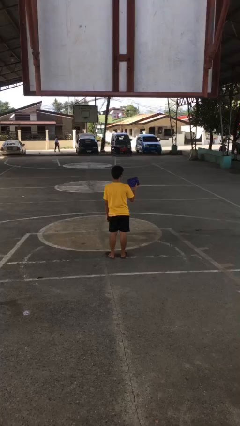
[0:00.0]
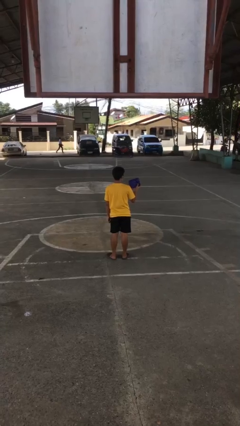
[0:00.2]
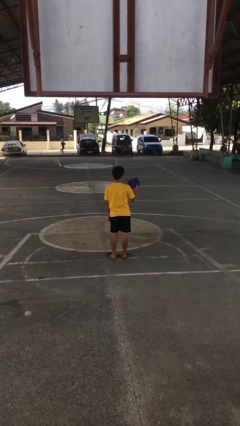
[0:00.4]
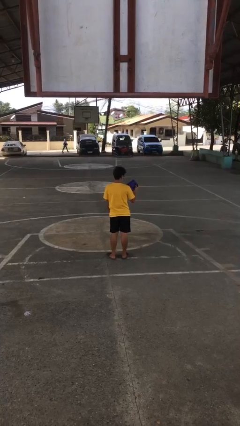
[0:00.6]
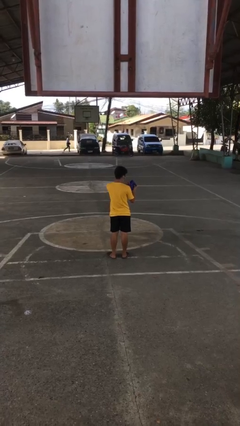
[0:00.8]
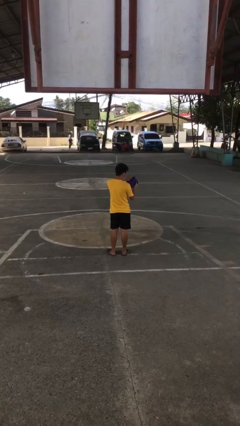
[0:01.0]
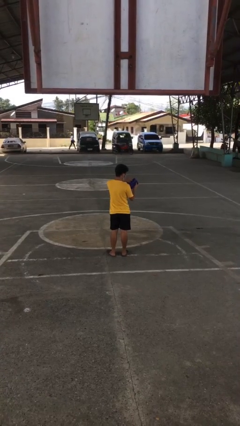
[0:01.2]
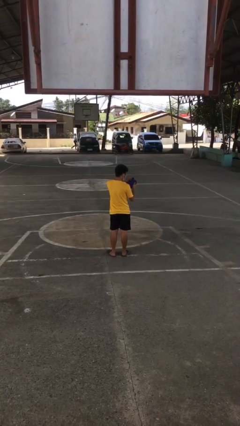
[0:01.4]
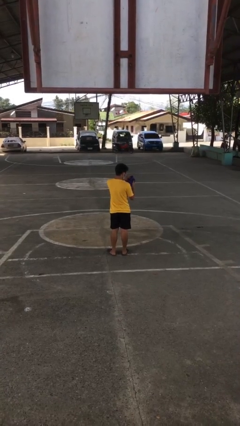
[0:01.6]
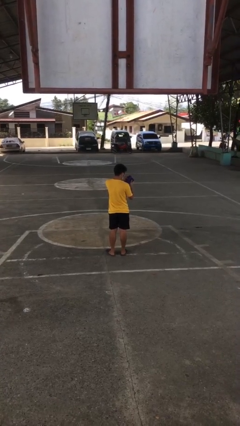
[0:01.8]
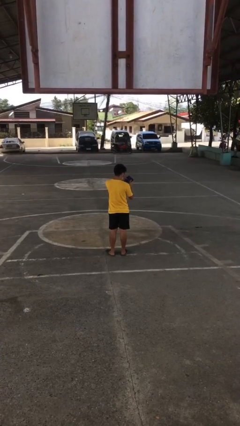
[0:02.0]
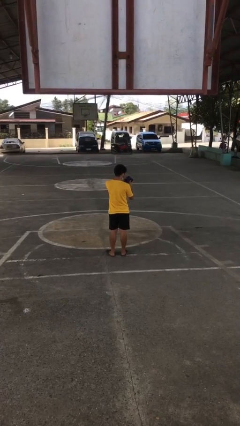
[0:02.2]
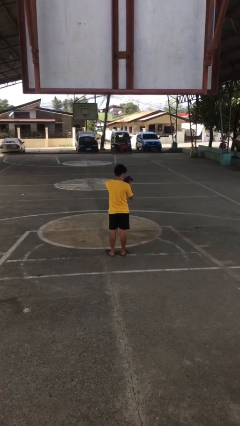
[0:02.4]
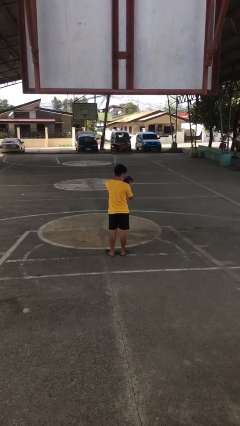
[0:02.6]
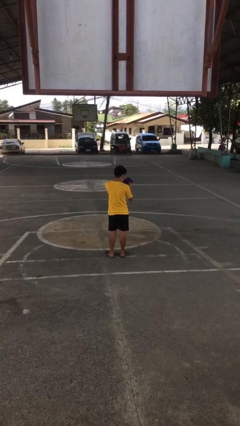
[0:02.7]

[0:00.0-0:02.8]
person searches in purse

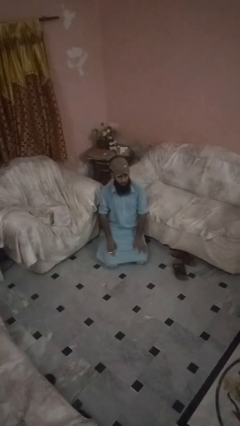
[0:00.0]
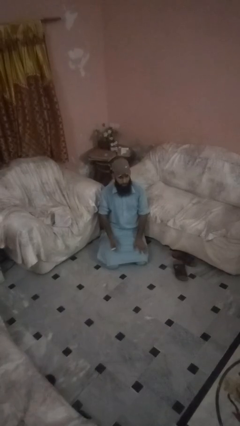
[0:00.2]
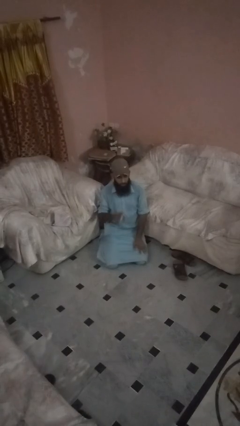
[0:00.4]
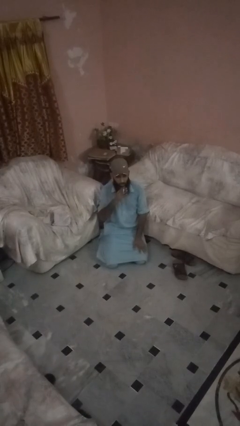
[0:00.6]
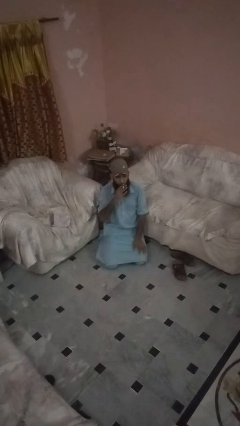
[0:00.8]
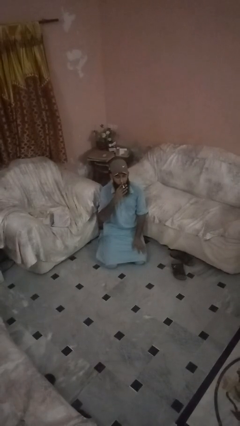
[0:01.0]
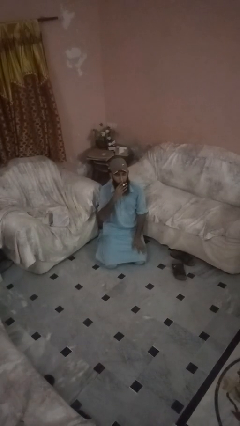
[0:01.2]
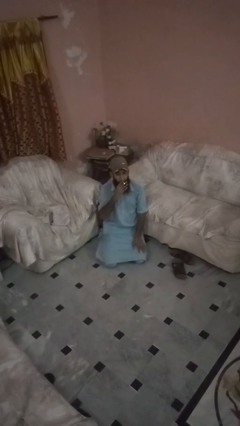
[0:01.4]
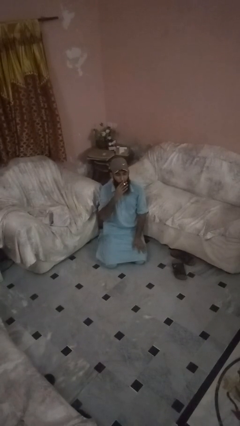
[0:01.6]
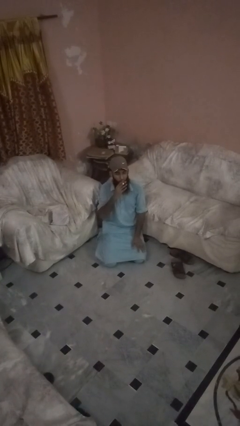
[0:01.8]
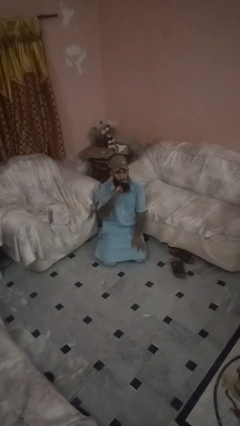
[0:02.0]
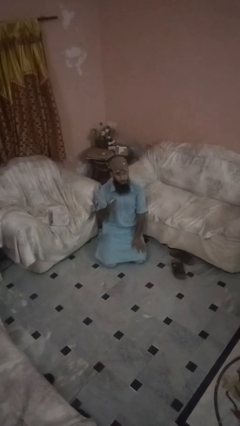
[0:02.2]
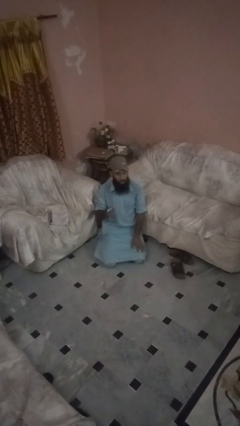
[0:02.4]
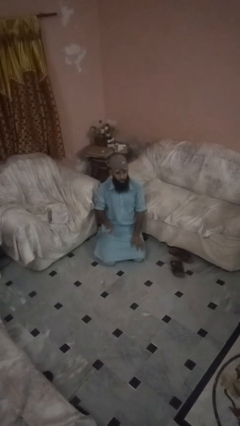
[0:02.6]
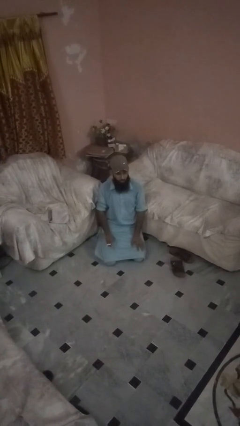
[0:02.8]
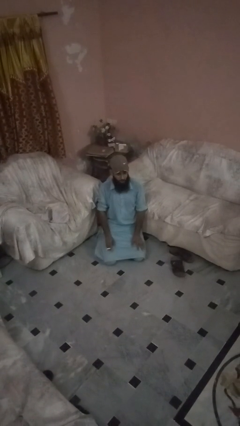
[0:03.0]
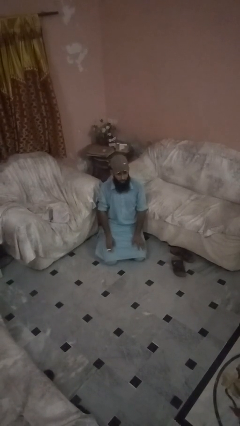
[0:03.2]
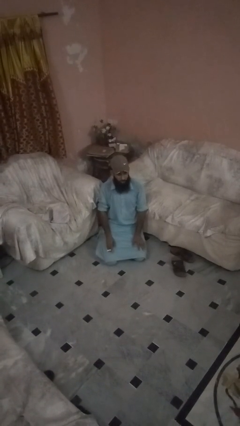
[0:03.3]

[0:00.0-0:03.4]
person vapes

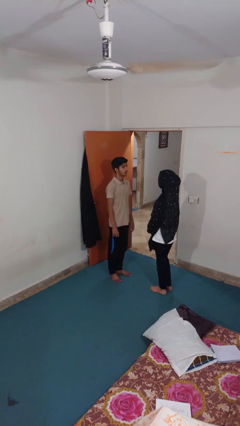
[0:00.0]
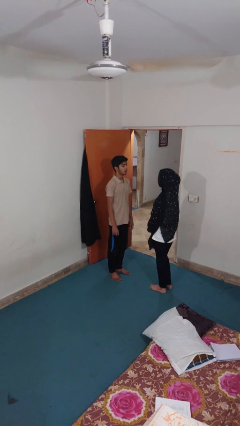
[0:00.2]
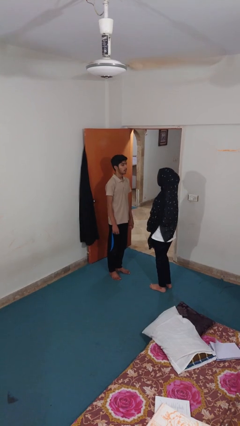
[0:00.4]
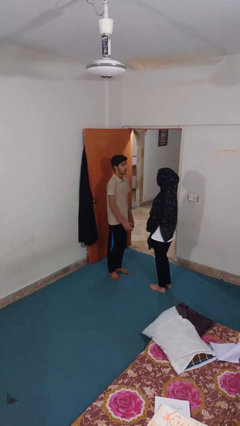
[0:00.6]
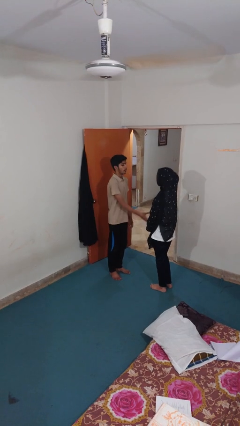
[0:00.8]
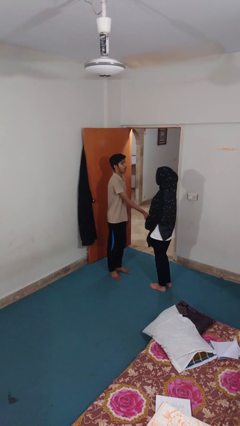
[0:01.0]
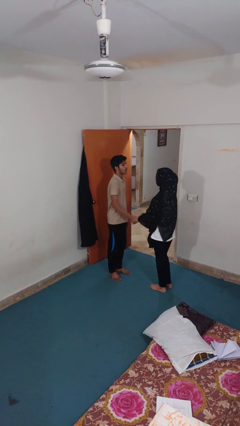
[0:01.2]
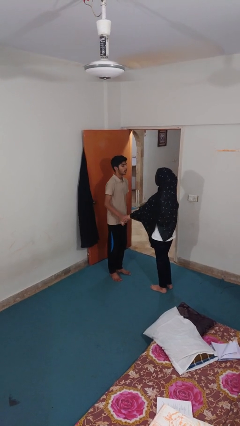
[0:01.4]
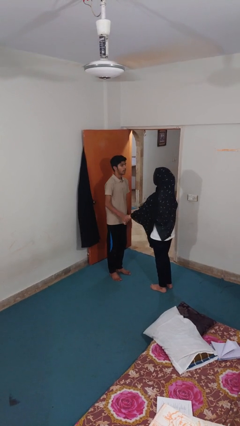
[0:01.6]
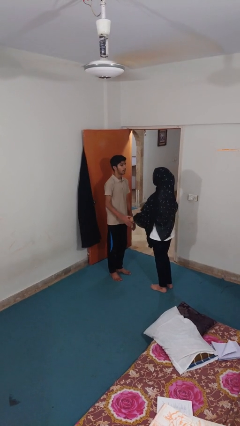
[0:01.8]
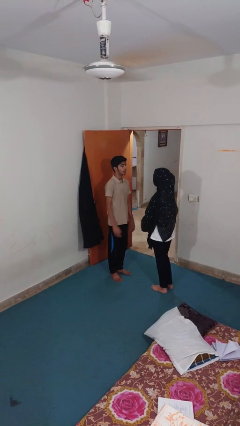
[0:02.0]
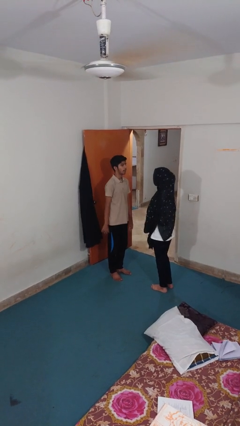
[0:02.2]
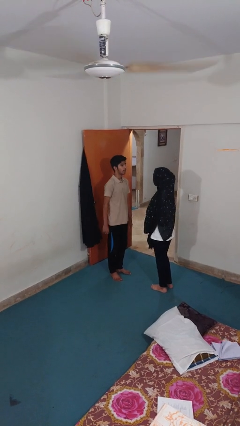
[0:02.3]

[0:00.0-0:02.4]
person grabs person by forearm

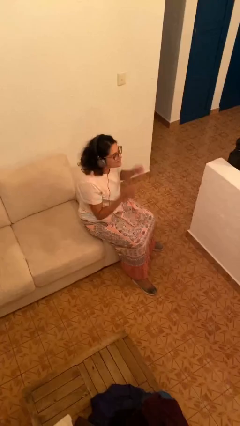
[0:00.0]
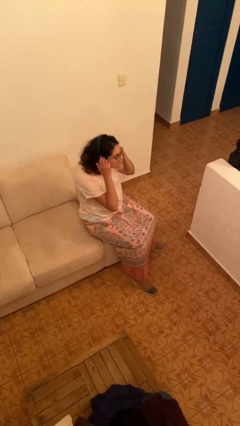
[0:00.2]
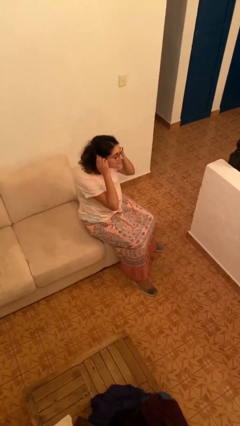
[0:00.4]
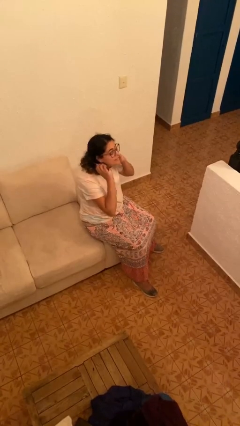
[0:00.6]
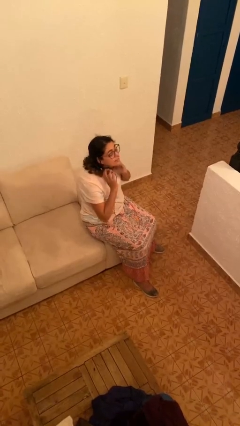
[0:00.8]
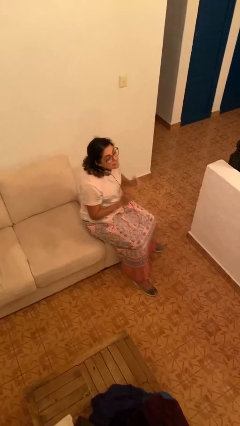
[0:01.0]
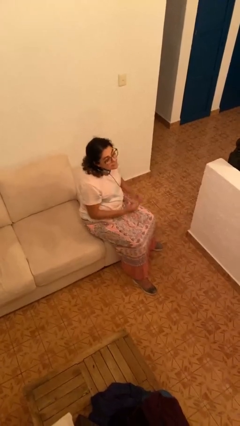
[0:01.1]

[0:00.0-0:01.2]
person takes off headphones

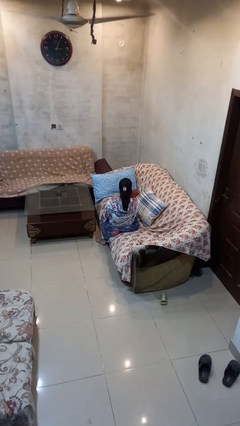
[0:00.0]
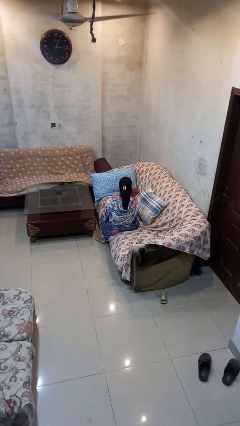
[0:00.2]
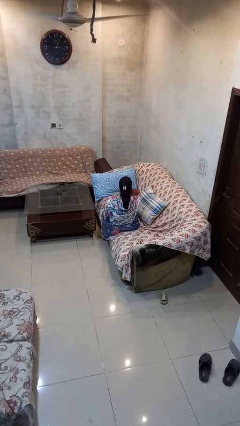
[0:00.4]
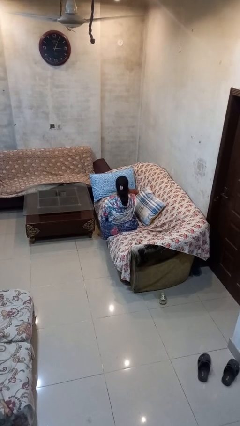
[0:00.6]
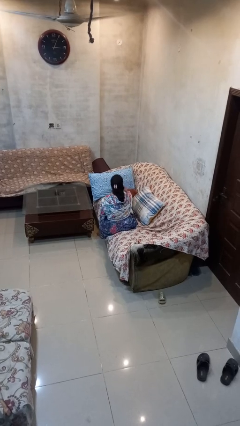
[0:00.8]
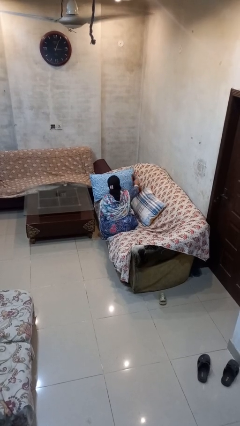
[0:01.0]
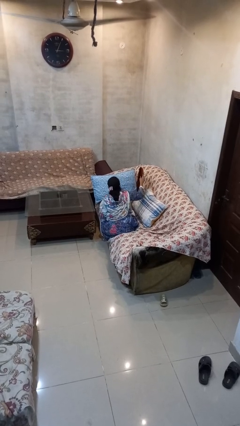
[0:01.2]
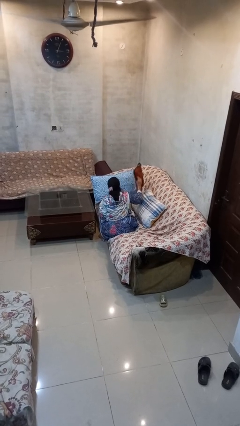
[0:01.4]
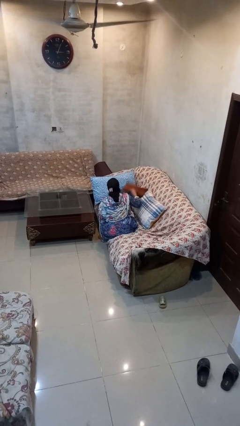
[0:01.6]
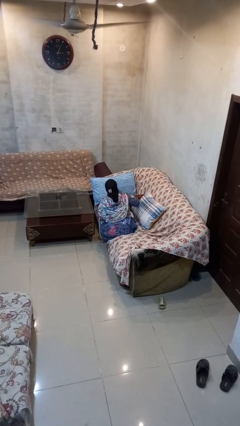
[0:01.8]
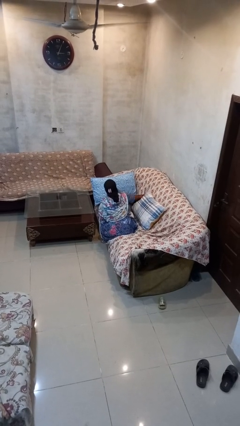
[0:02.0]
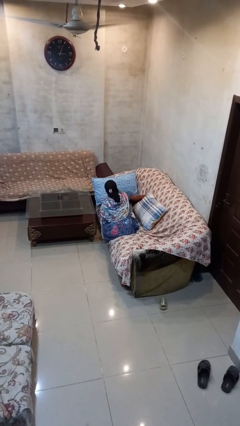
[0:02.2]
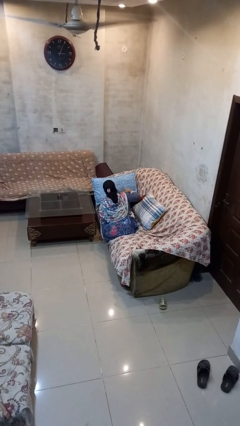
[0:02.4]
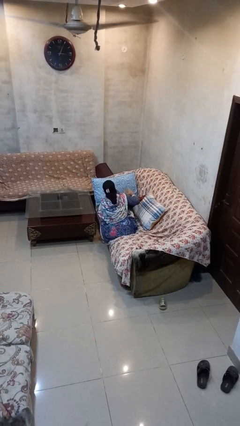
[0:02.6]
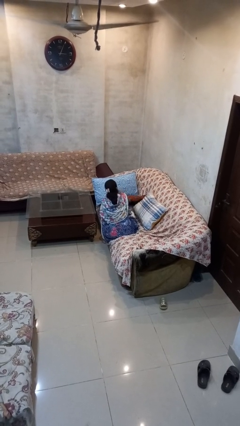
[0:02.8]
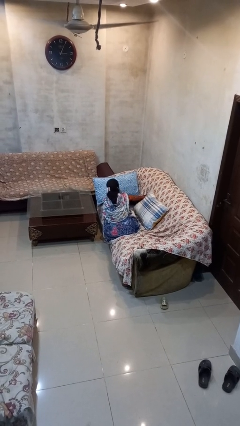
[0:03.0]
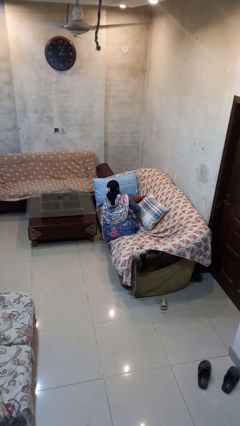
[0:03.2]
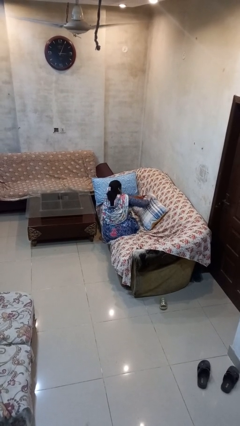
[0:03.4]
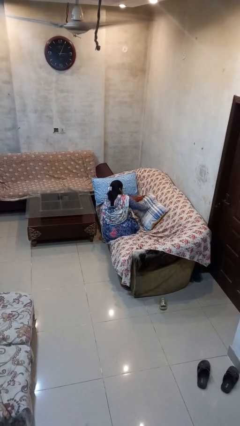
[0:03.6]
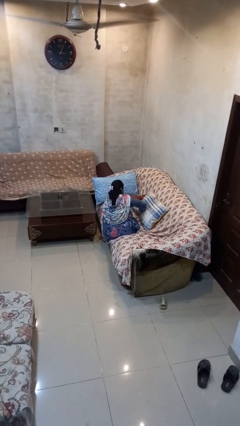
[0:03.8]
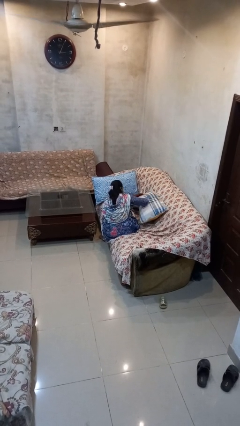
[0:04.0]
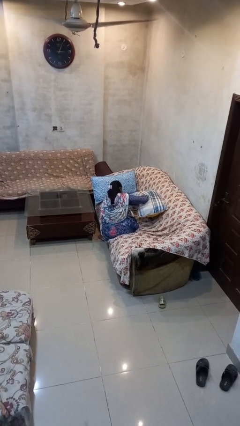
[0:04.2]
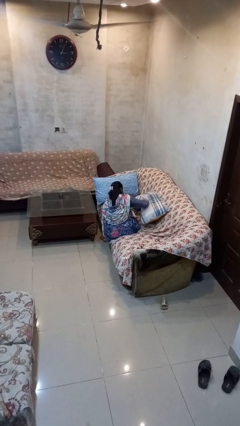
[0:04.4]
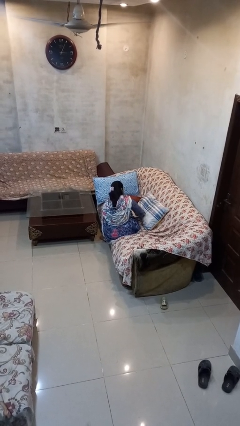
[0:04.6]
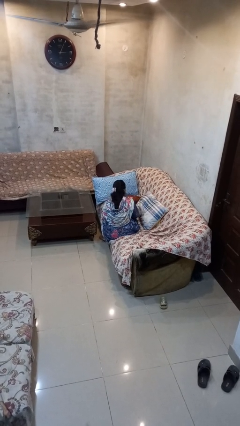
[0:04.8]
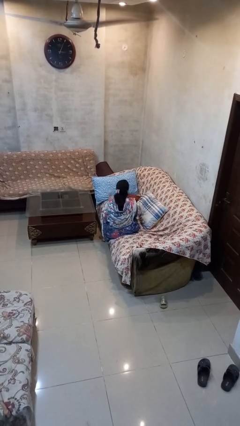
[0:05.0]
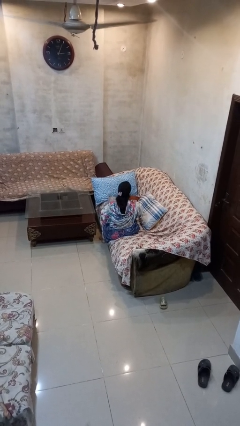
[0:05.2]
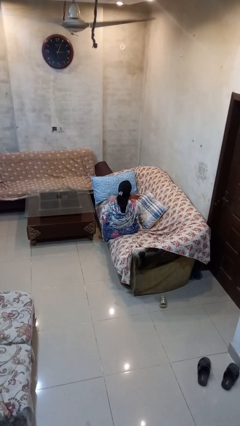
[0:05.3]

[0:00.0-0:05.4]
person searches in couch

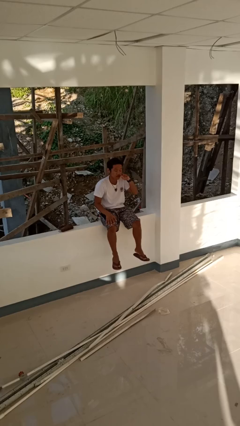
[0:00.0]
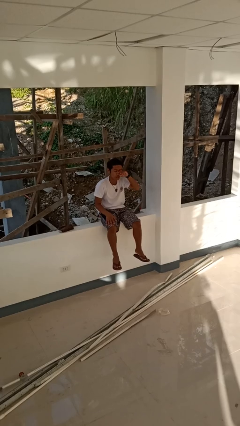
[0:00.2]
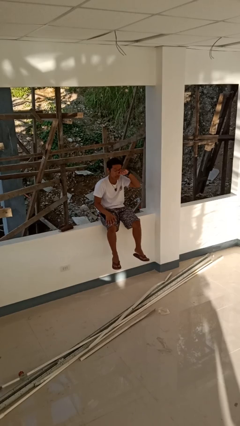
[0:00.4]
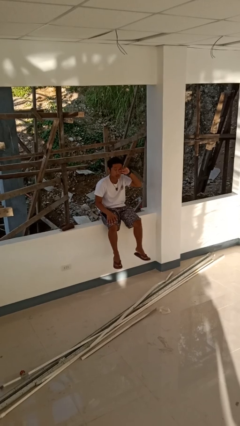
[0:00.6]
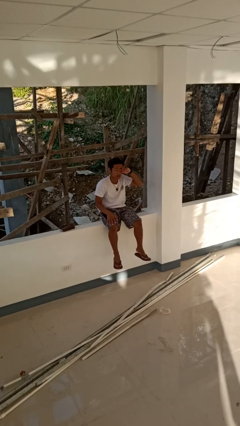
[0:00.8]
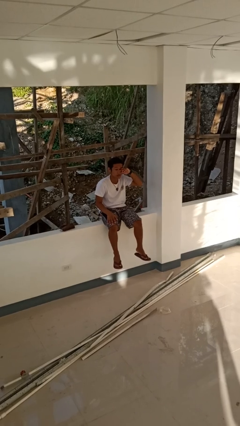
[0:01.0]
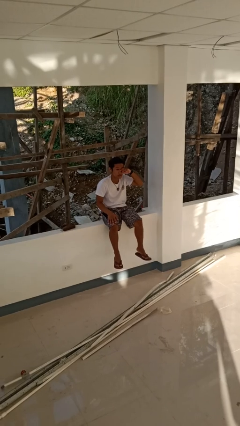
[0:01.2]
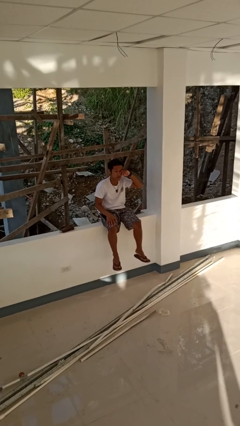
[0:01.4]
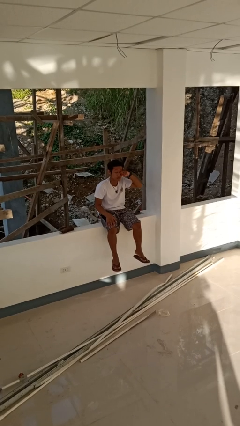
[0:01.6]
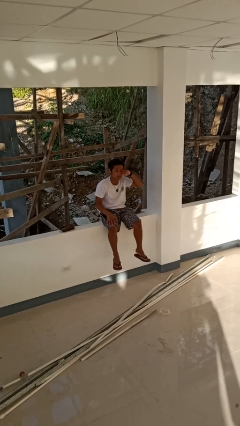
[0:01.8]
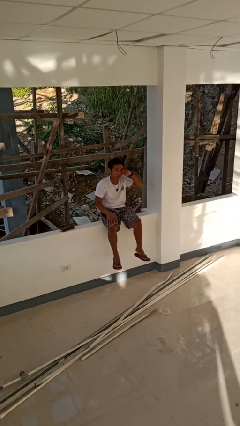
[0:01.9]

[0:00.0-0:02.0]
person rubs eyes
